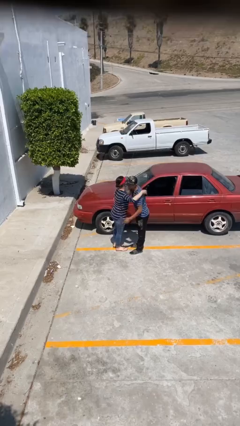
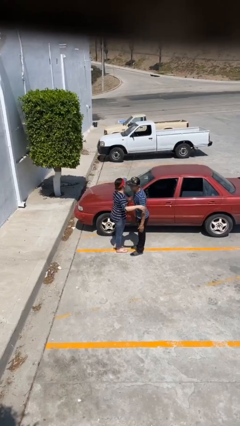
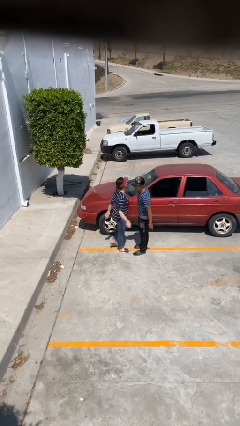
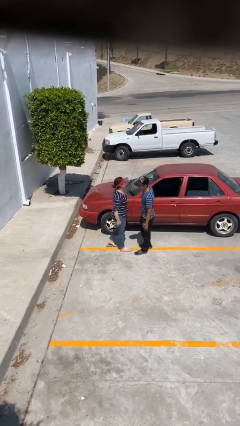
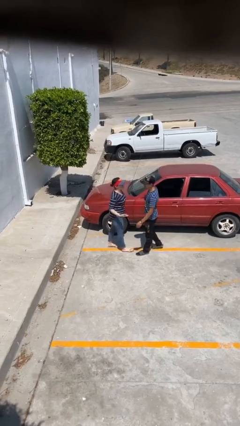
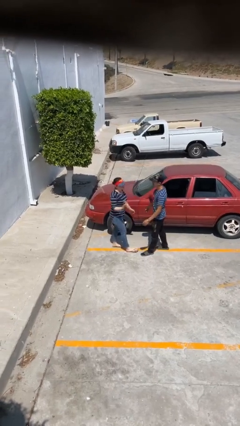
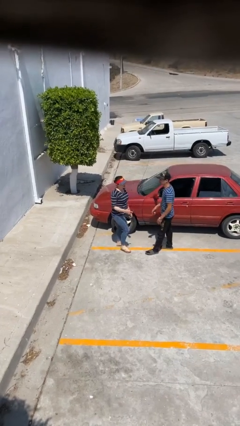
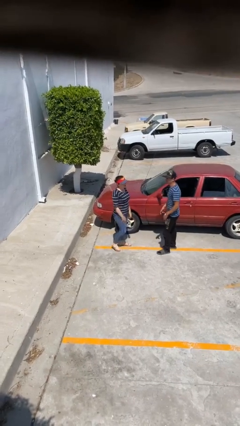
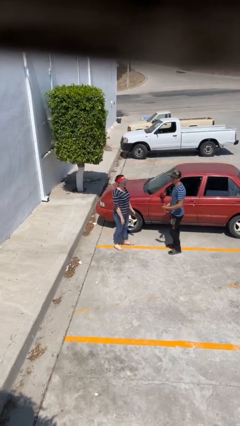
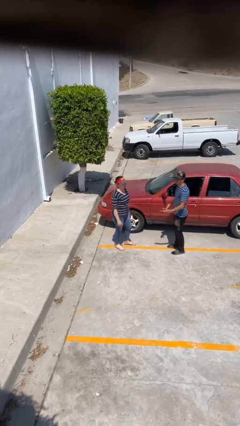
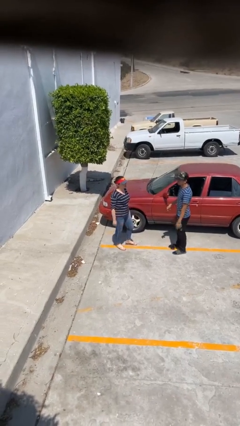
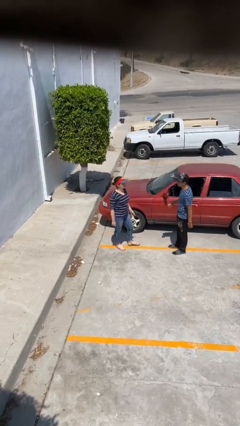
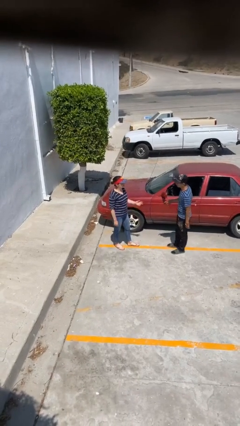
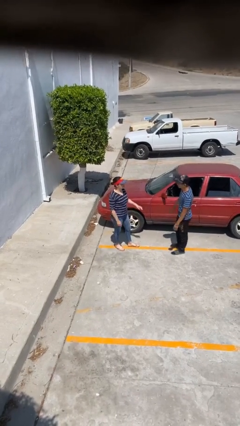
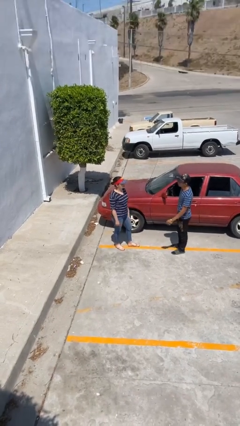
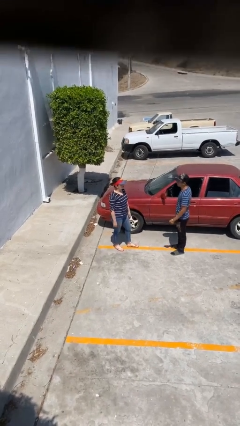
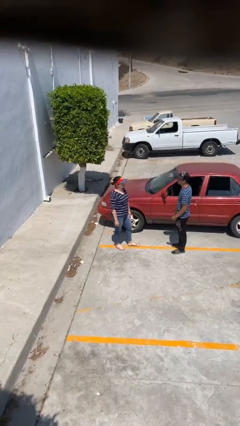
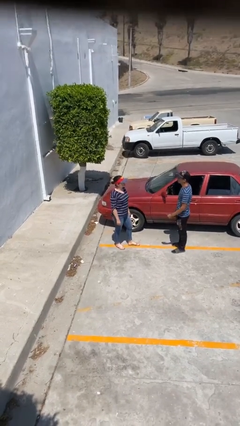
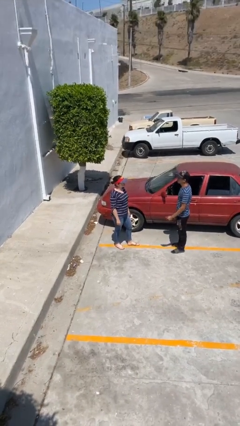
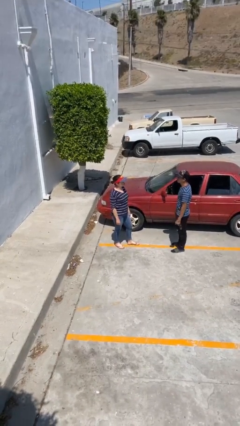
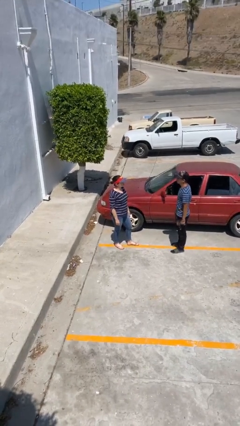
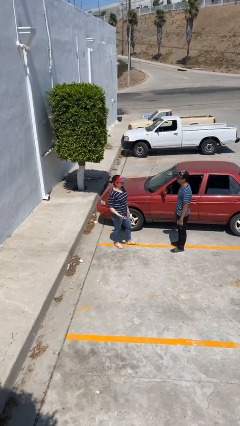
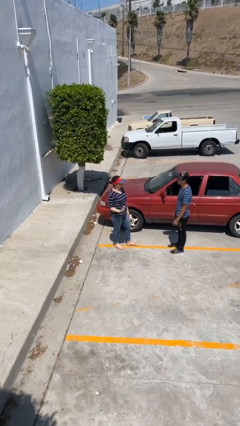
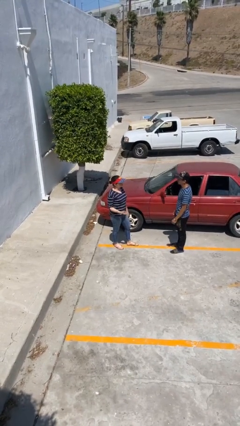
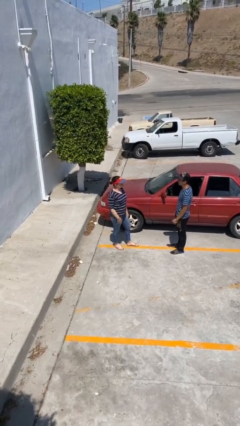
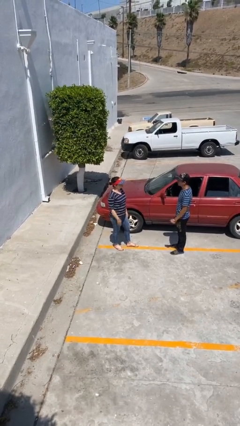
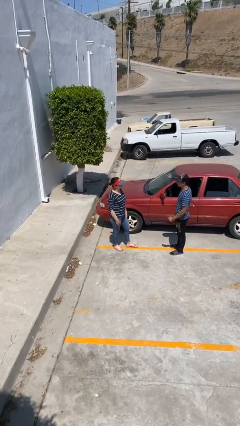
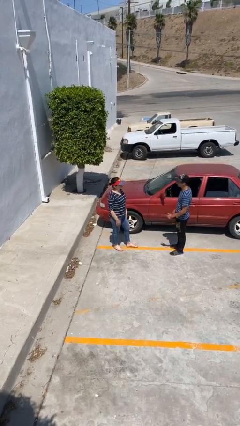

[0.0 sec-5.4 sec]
person talks to person

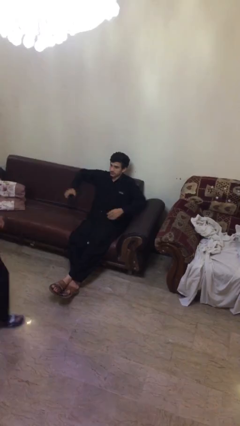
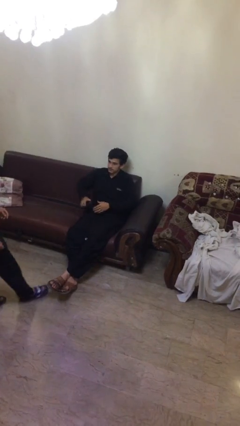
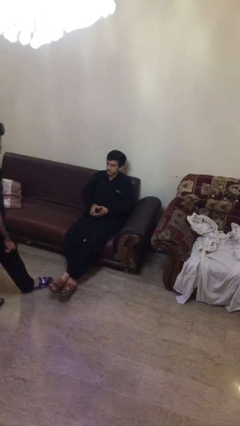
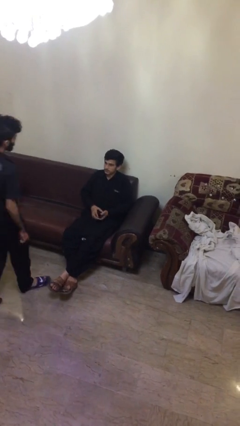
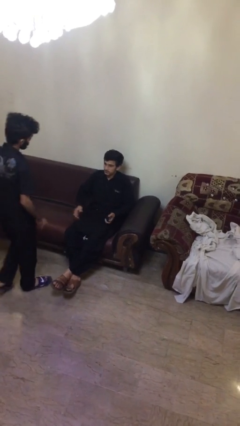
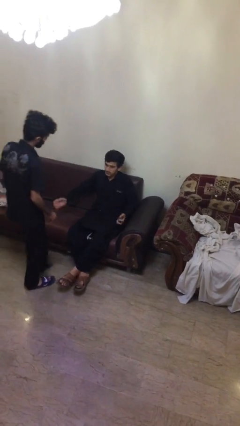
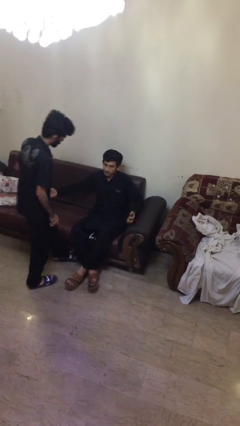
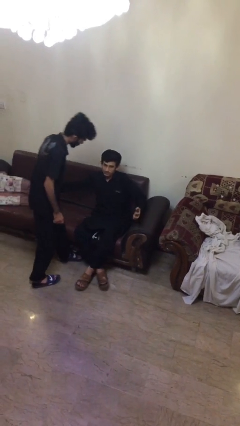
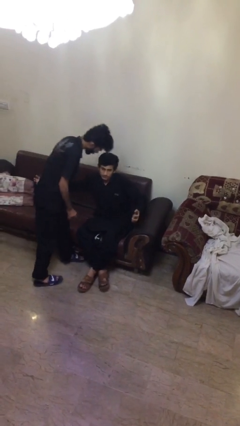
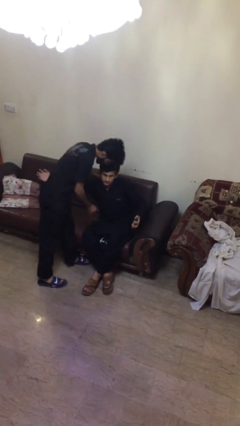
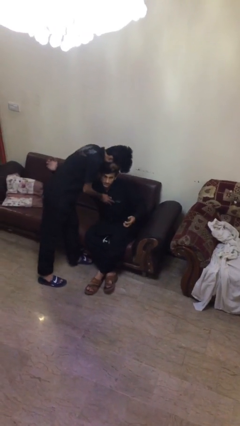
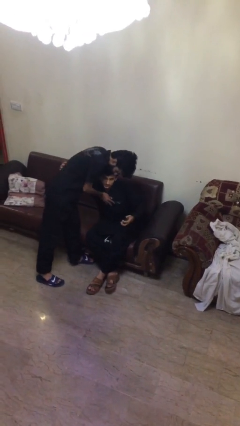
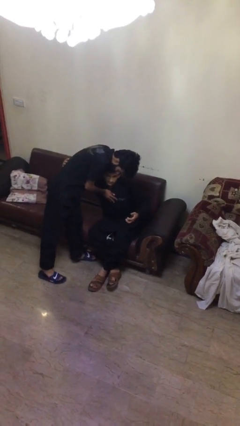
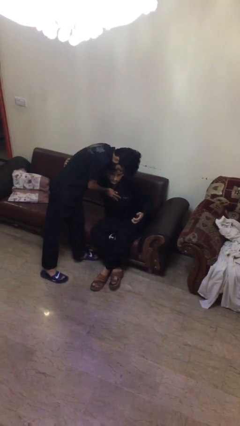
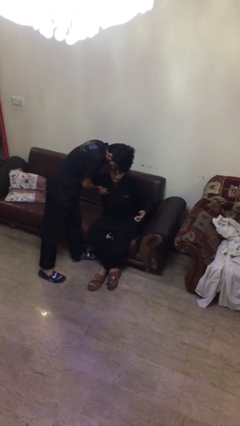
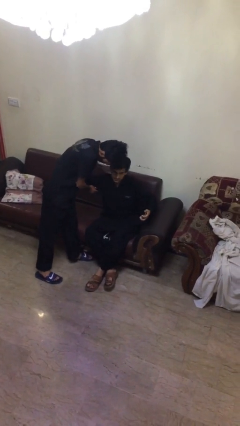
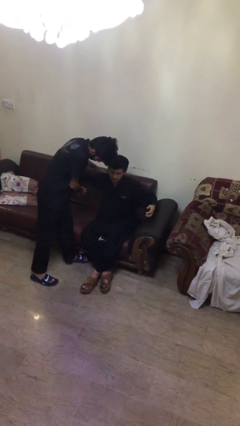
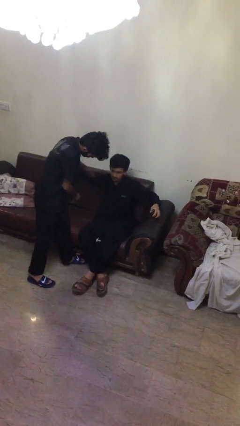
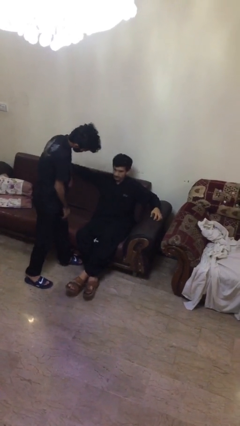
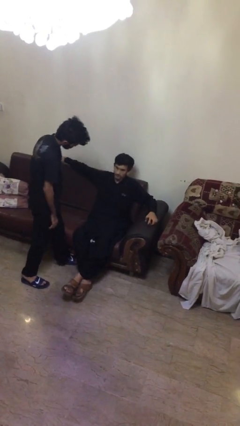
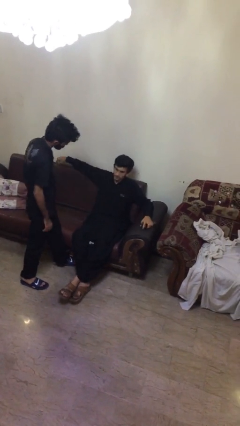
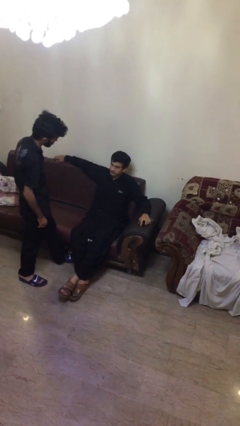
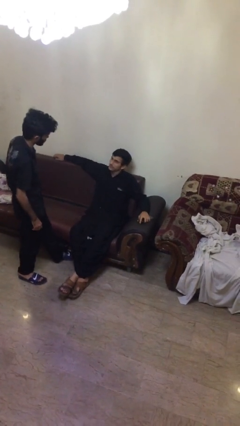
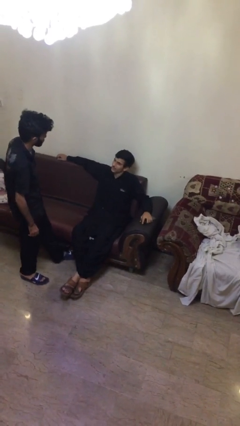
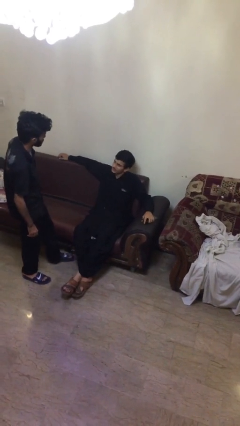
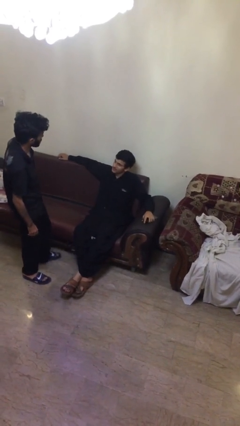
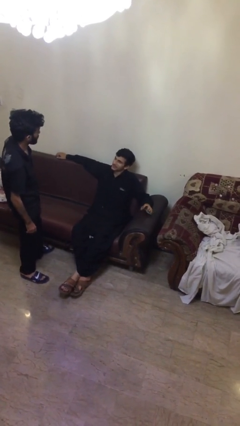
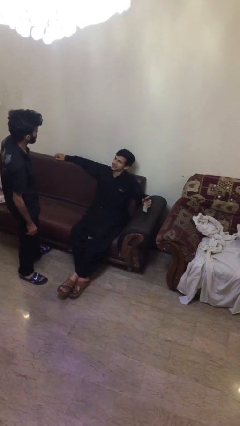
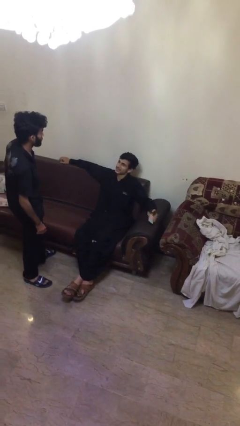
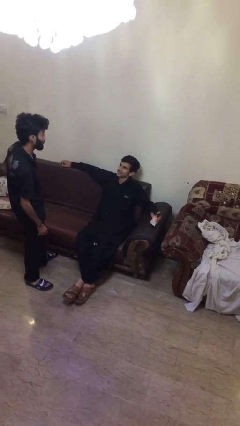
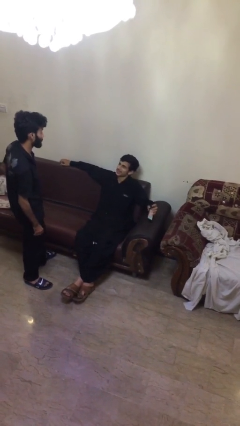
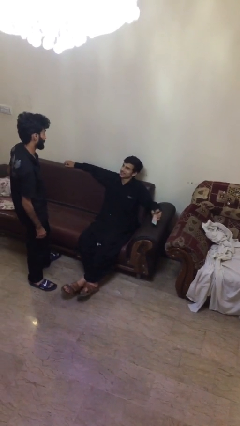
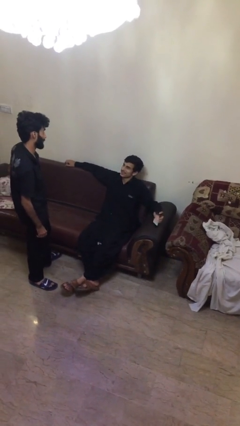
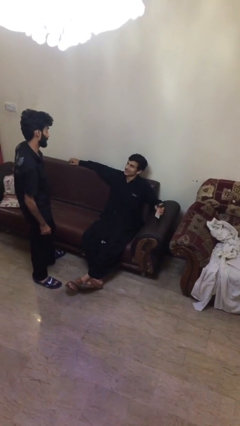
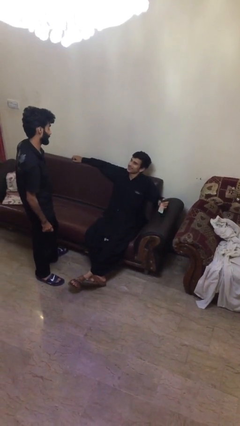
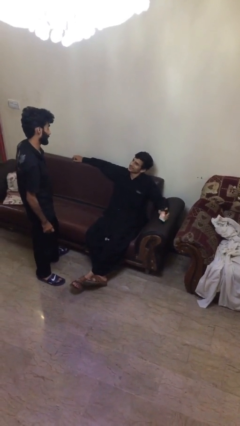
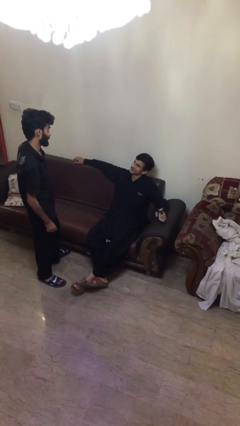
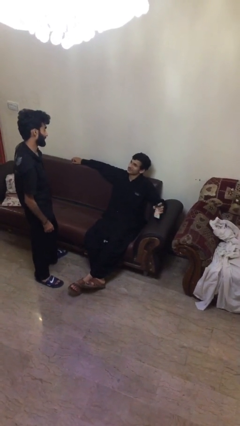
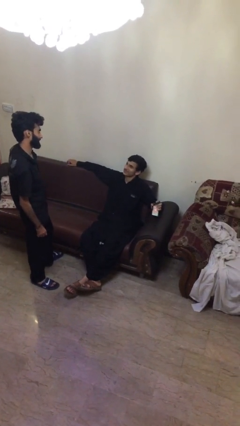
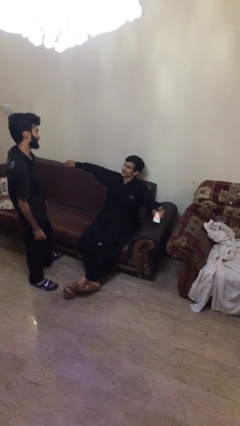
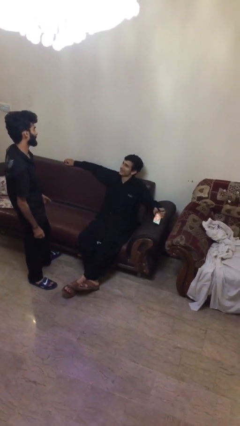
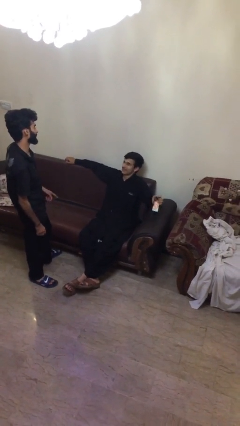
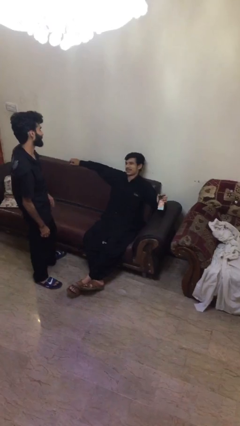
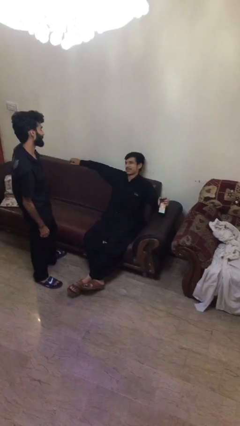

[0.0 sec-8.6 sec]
person embraces person

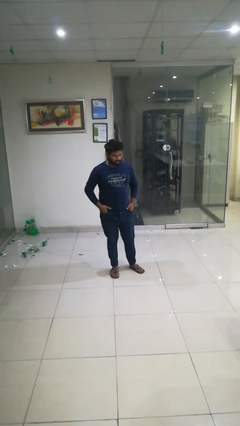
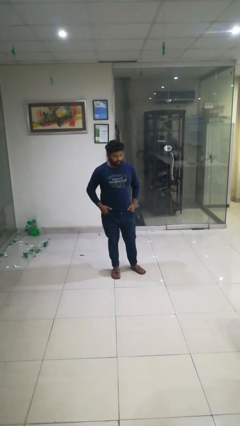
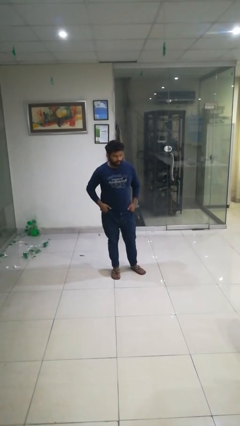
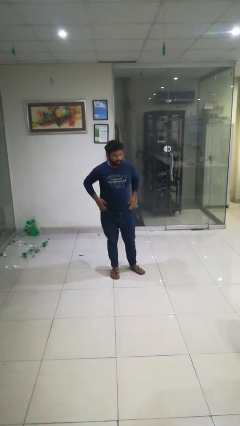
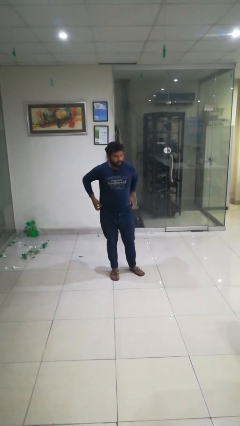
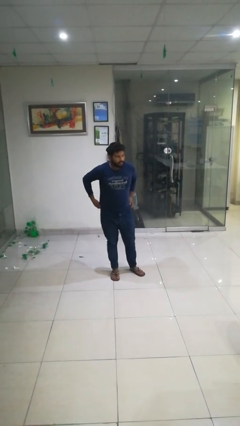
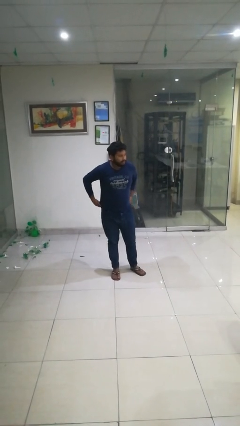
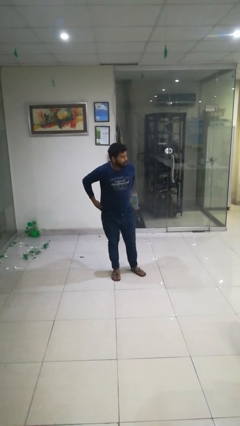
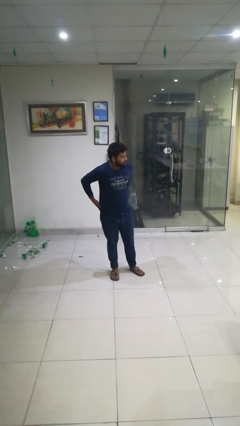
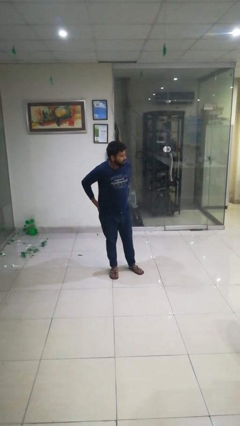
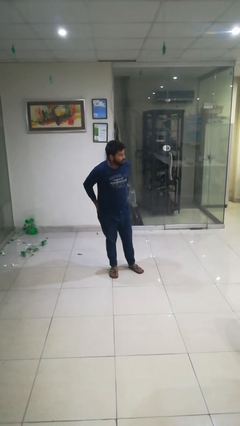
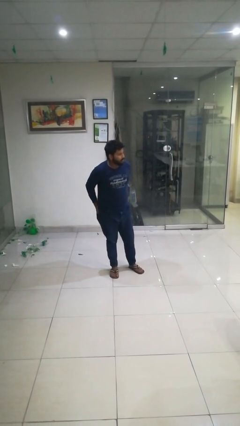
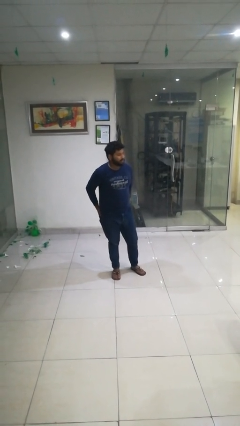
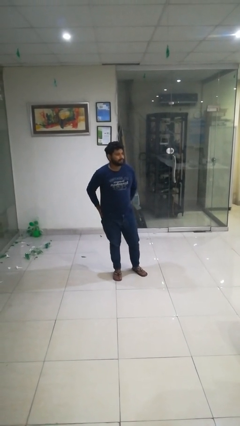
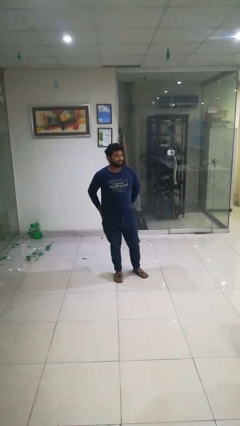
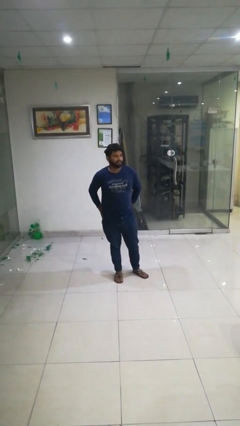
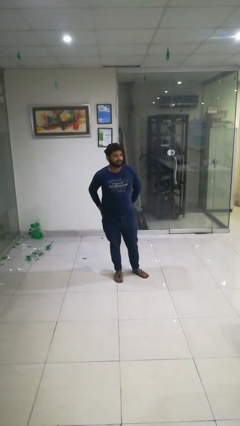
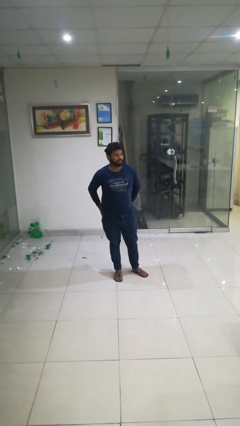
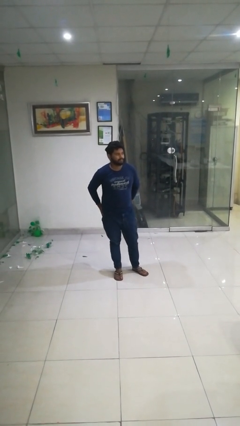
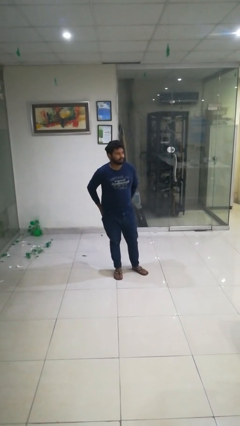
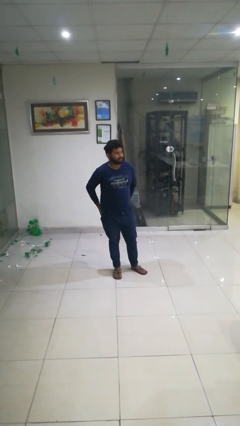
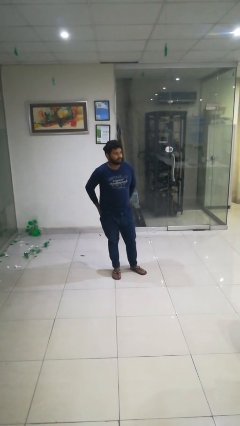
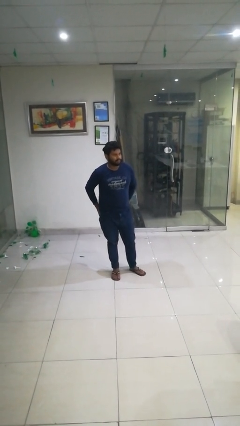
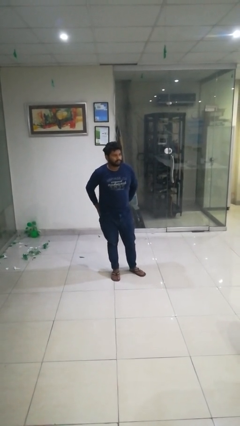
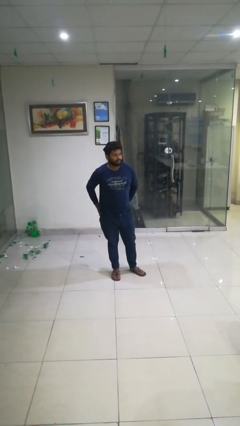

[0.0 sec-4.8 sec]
person puts hands in back pockets
